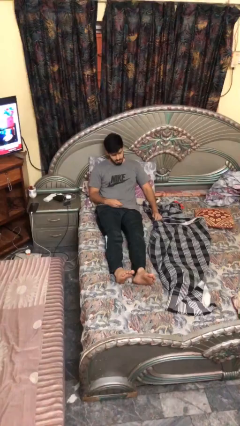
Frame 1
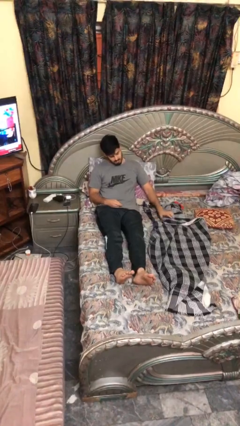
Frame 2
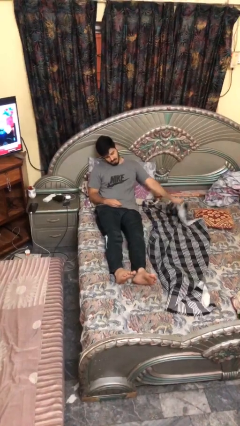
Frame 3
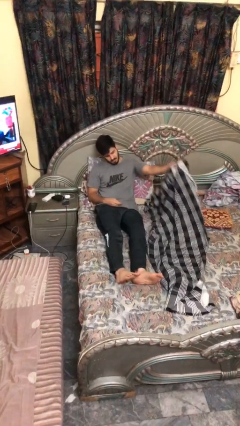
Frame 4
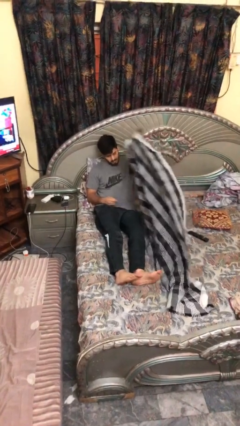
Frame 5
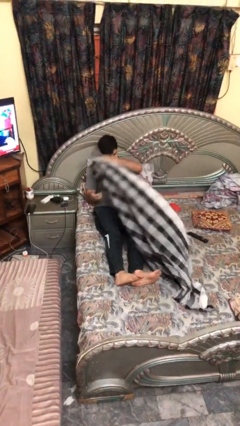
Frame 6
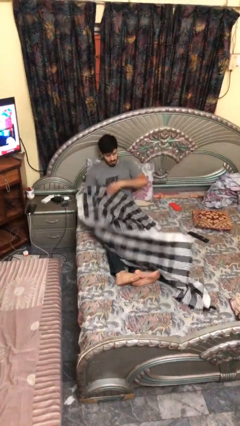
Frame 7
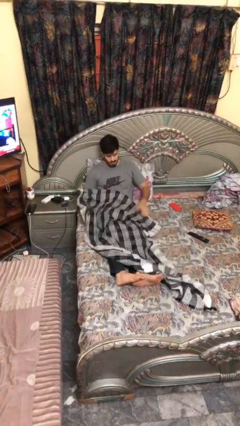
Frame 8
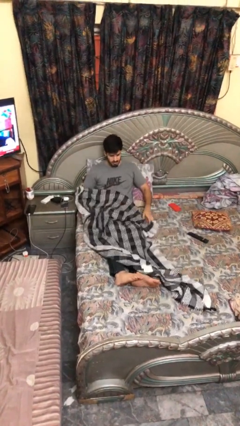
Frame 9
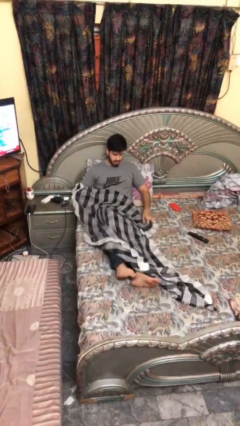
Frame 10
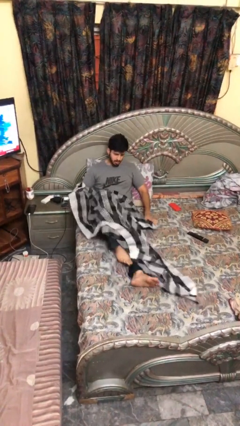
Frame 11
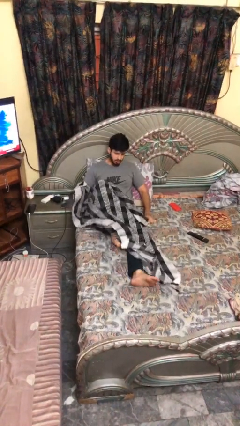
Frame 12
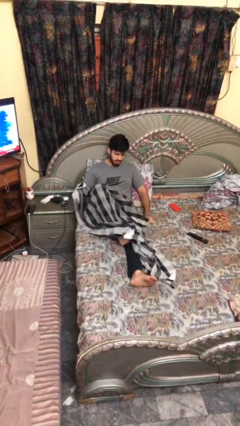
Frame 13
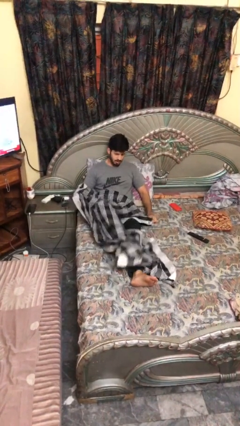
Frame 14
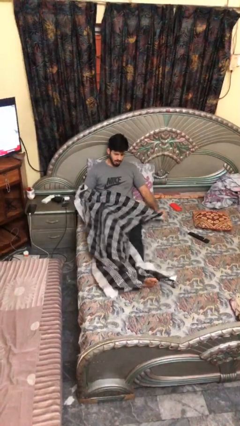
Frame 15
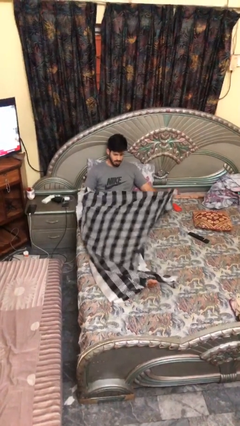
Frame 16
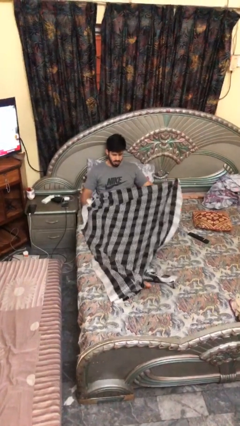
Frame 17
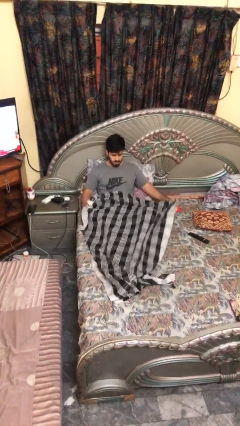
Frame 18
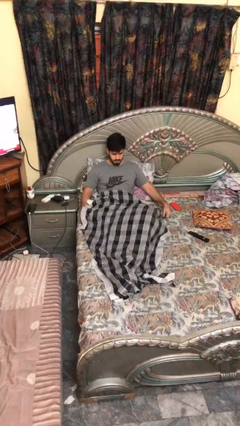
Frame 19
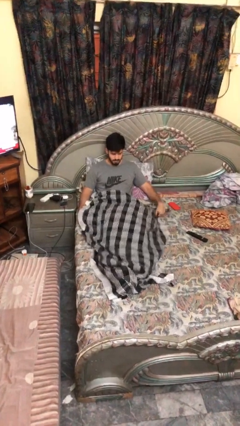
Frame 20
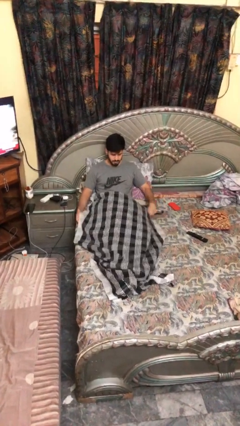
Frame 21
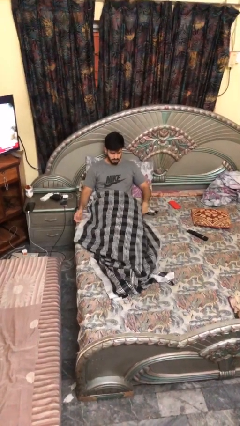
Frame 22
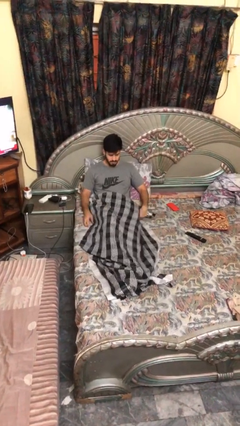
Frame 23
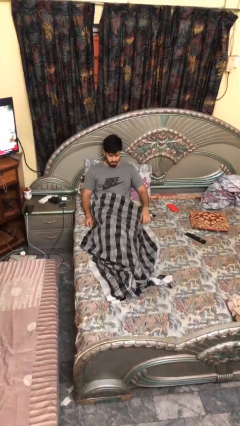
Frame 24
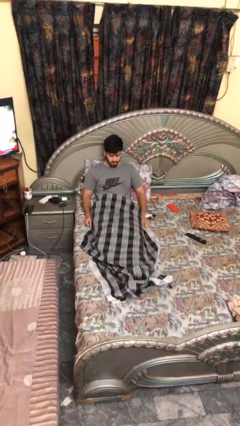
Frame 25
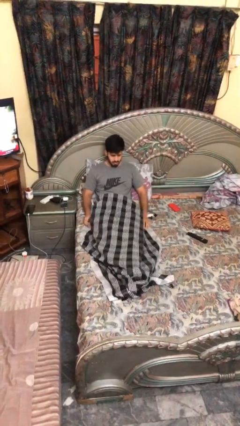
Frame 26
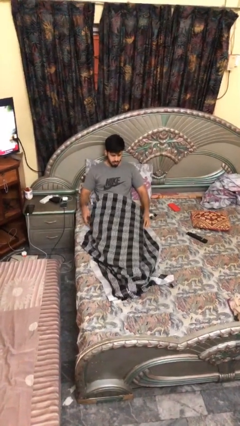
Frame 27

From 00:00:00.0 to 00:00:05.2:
person covers with bedsheets

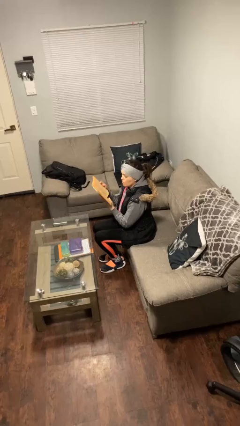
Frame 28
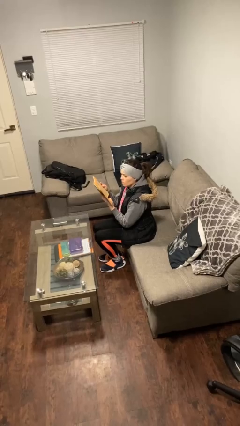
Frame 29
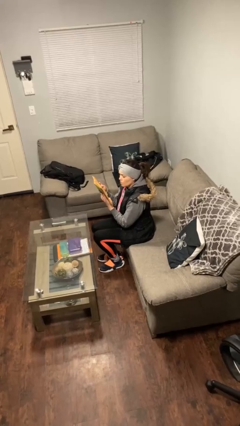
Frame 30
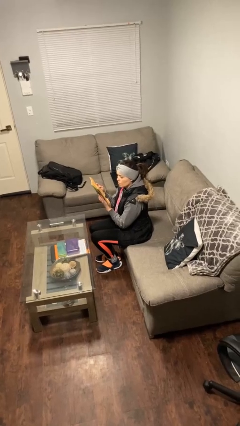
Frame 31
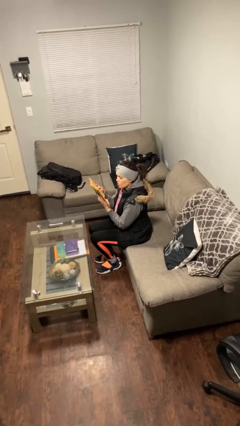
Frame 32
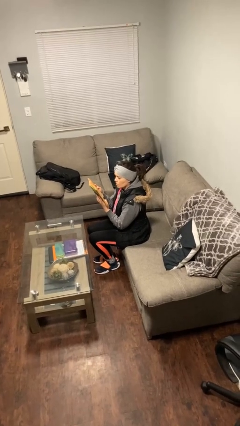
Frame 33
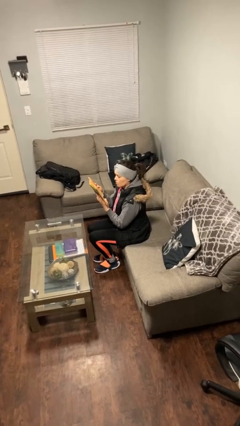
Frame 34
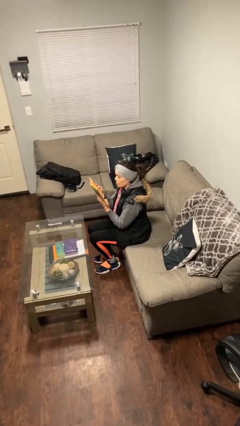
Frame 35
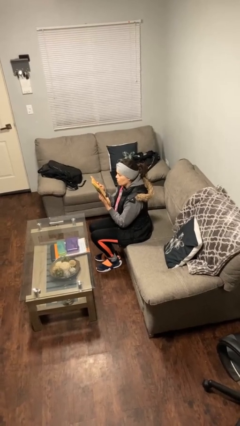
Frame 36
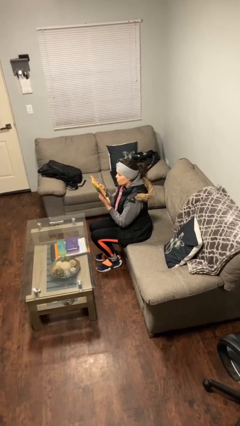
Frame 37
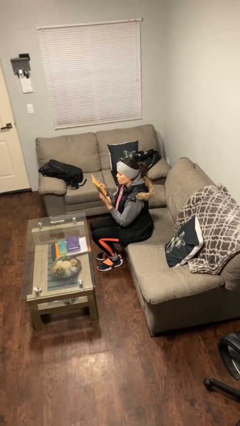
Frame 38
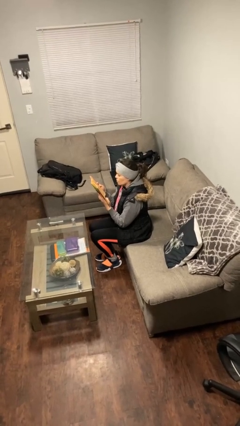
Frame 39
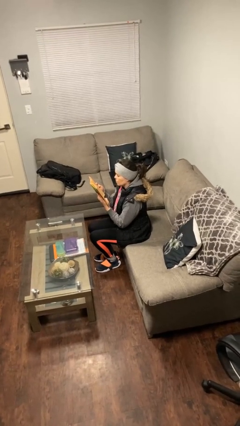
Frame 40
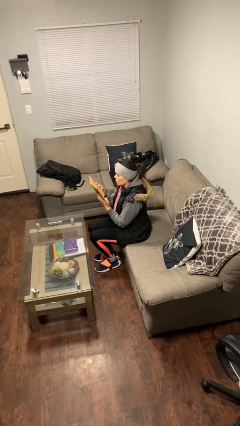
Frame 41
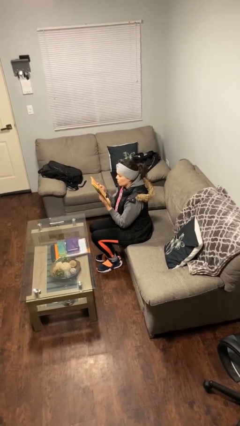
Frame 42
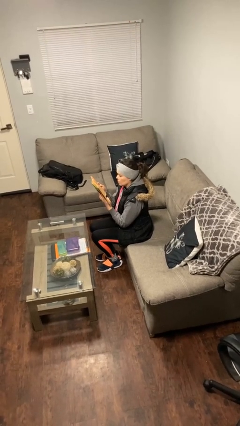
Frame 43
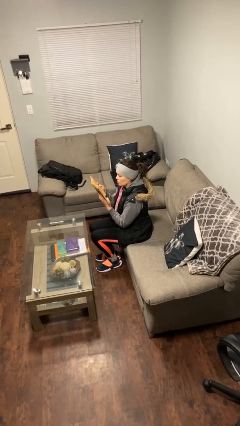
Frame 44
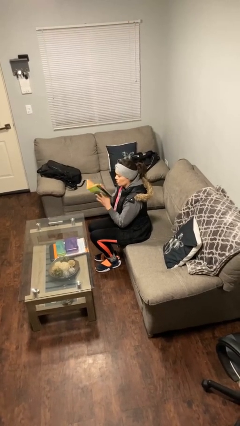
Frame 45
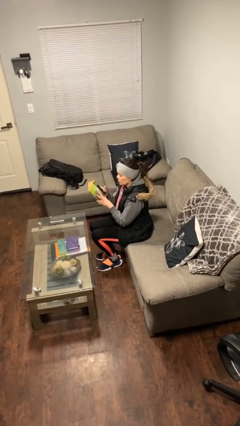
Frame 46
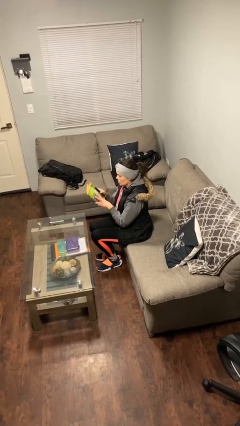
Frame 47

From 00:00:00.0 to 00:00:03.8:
person reads document

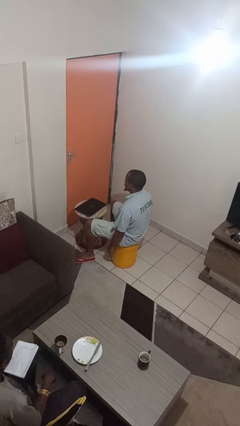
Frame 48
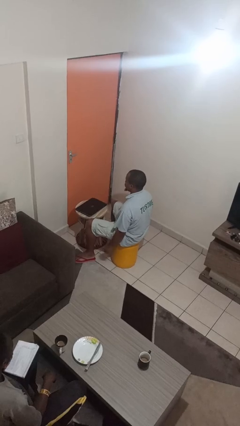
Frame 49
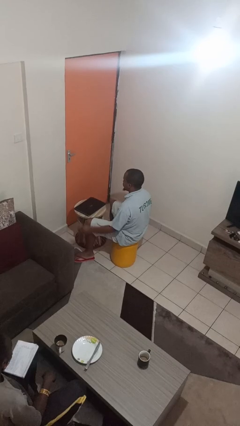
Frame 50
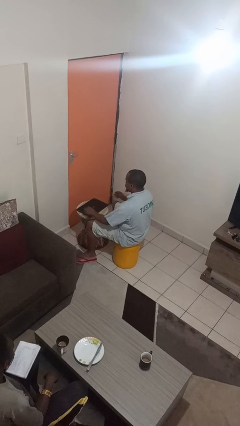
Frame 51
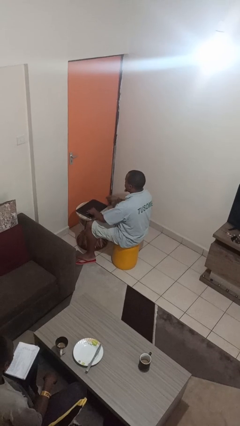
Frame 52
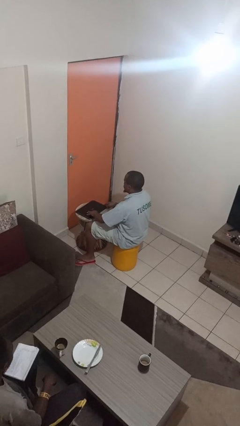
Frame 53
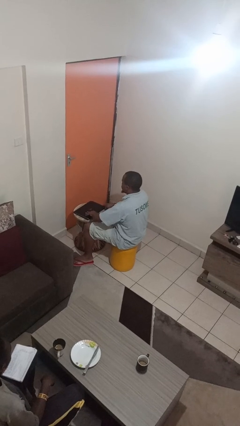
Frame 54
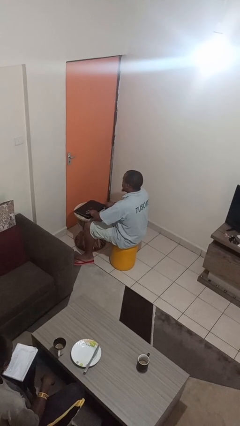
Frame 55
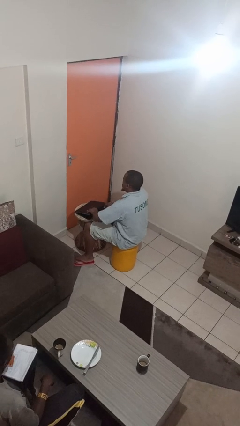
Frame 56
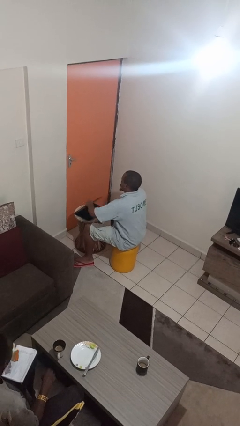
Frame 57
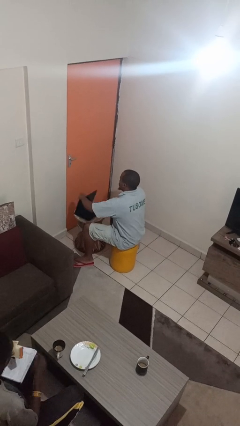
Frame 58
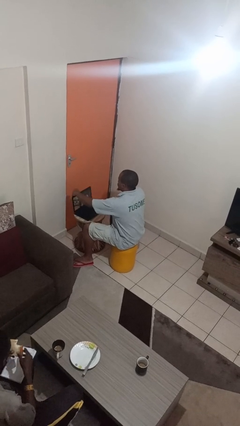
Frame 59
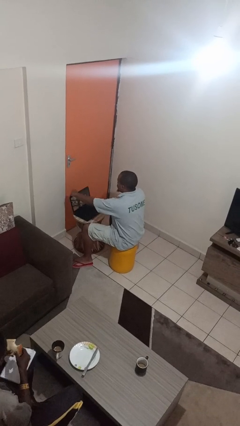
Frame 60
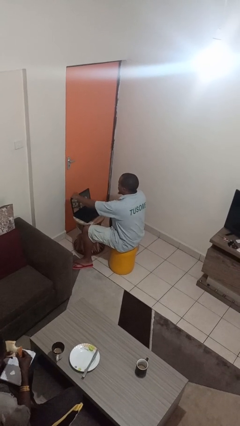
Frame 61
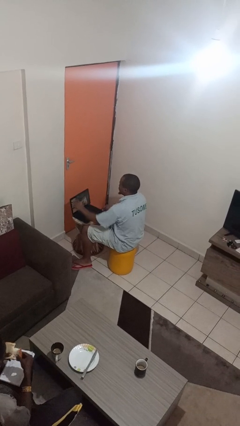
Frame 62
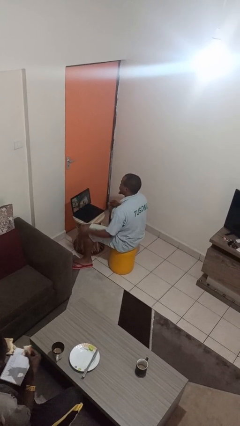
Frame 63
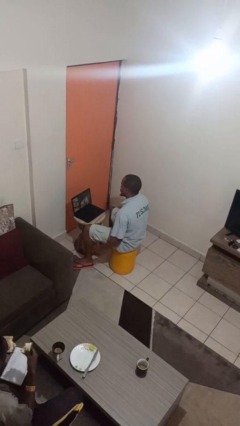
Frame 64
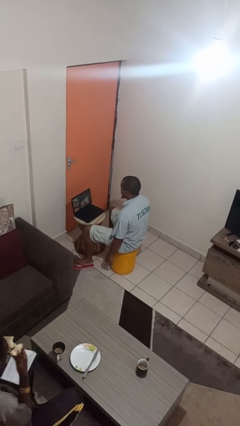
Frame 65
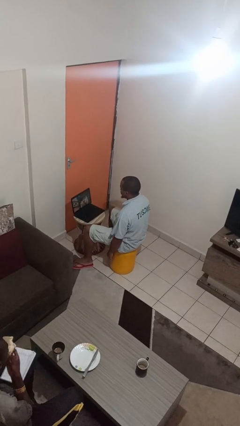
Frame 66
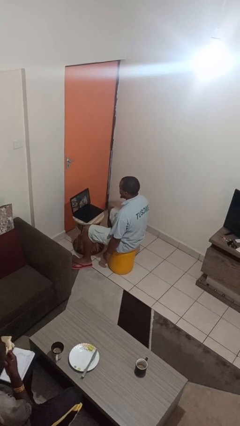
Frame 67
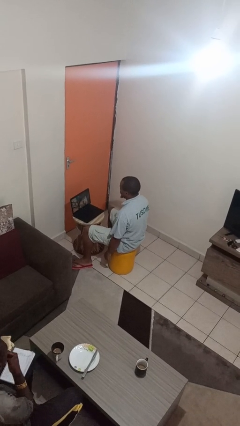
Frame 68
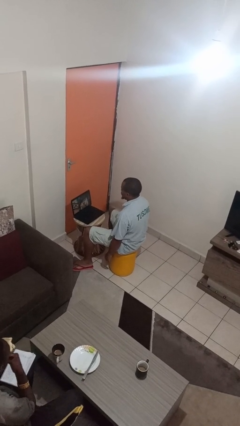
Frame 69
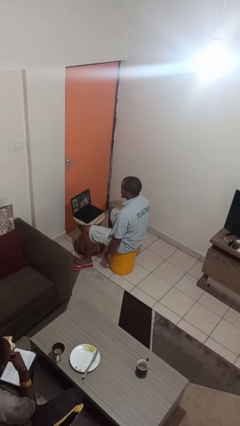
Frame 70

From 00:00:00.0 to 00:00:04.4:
person opens laptop

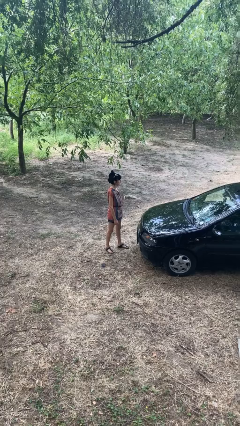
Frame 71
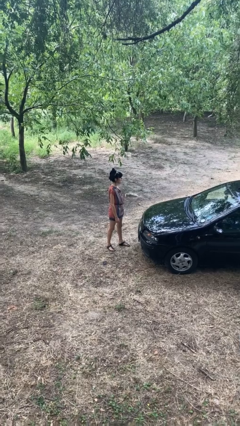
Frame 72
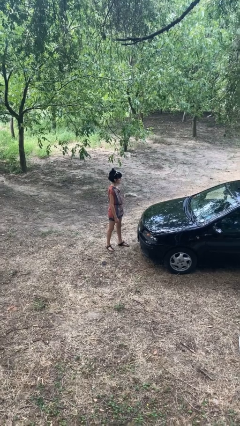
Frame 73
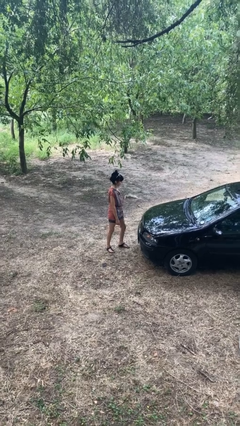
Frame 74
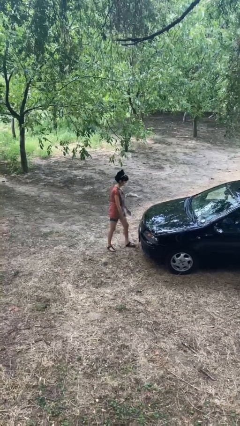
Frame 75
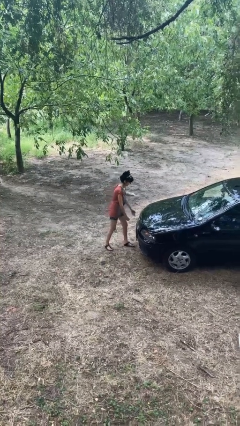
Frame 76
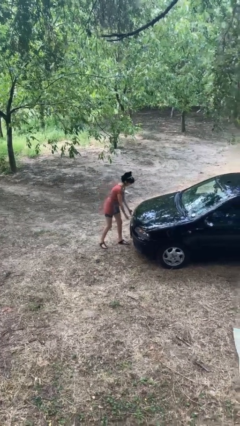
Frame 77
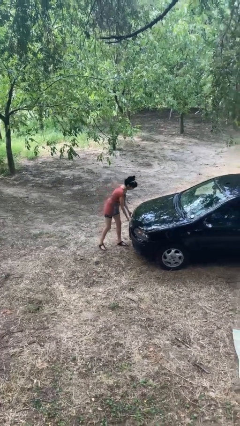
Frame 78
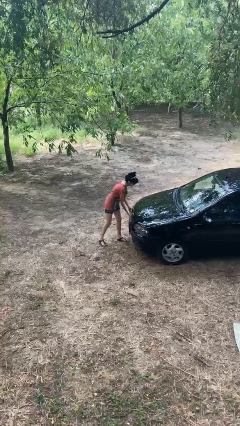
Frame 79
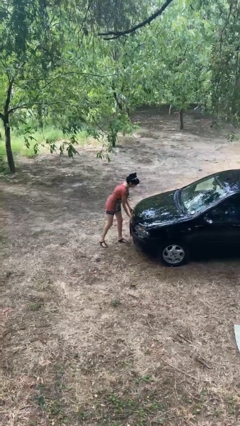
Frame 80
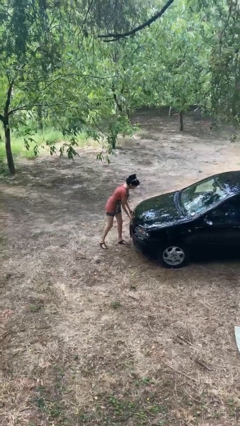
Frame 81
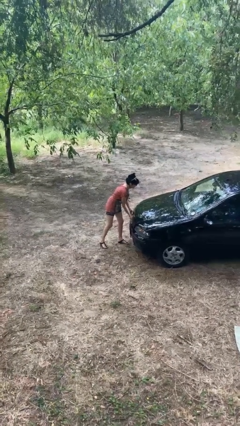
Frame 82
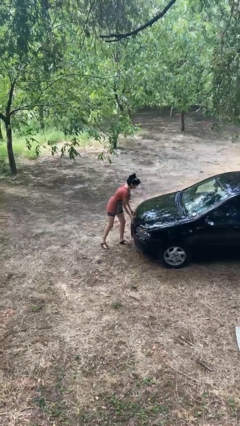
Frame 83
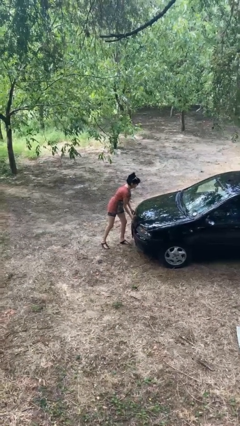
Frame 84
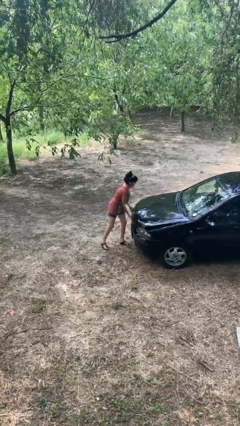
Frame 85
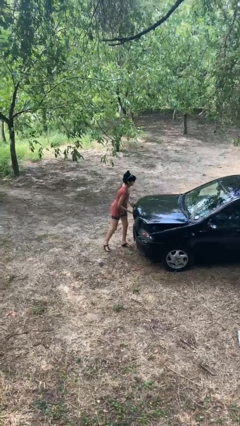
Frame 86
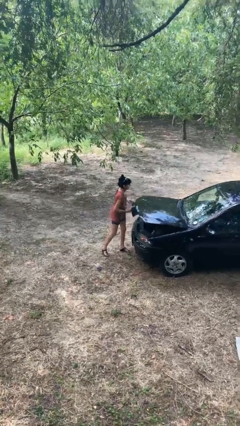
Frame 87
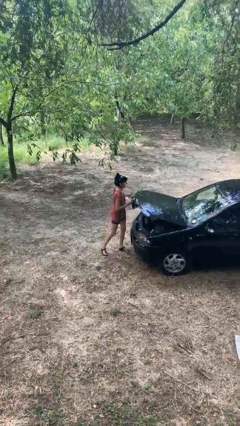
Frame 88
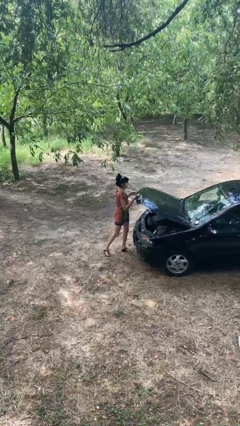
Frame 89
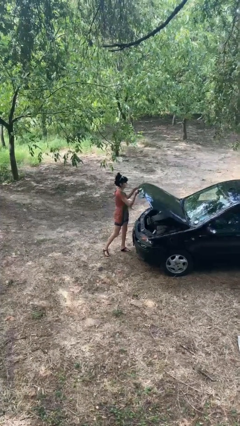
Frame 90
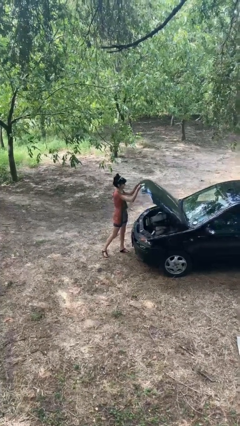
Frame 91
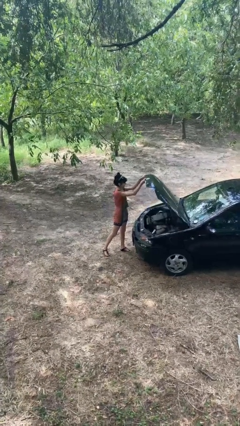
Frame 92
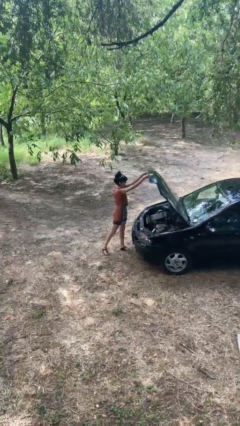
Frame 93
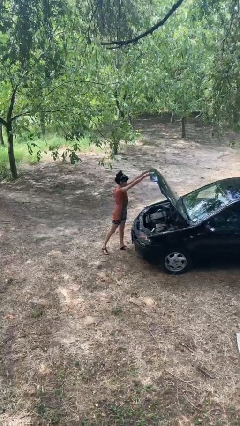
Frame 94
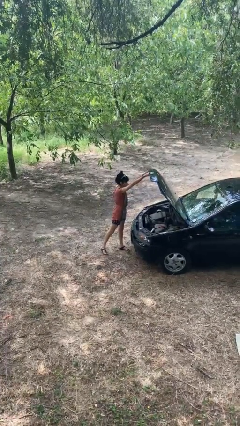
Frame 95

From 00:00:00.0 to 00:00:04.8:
person opens car hood

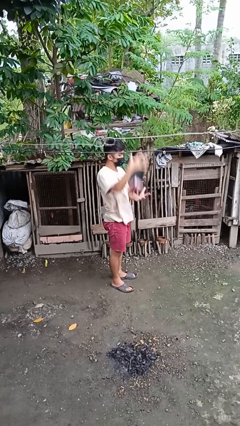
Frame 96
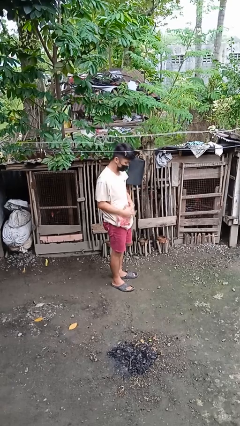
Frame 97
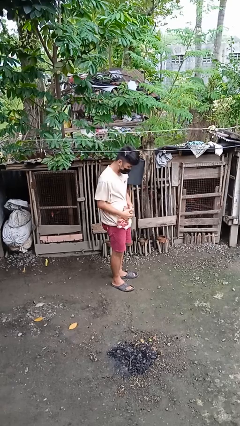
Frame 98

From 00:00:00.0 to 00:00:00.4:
person drops object
